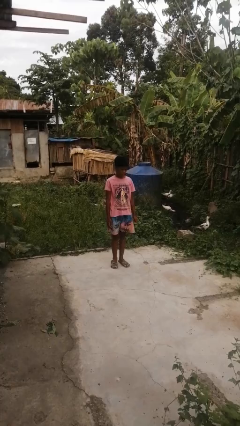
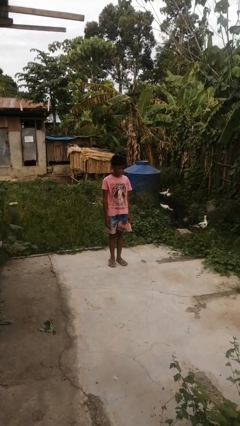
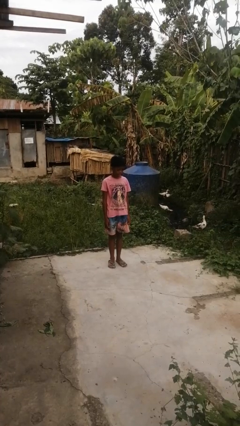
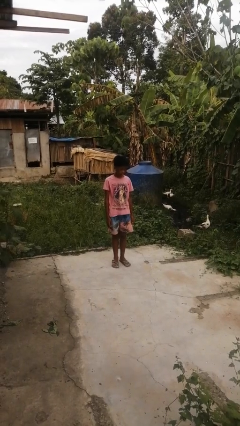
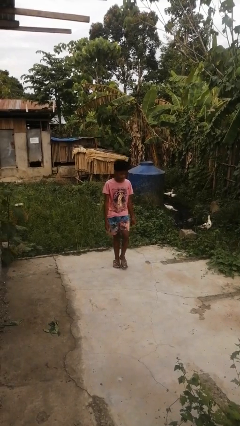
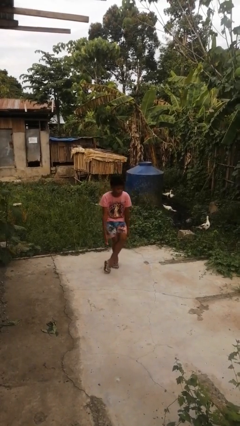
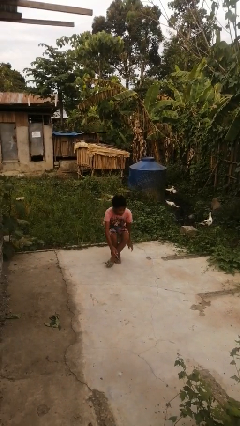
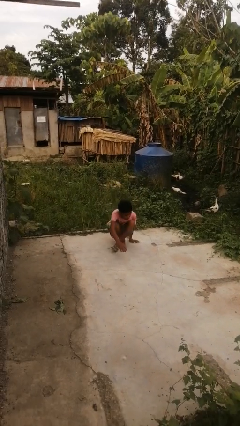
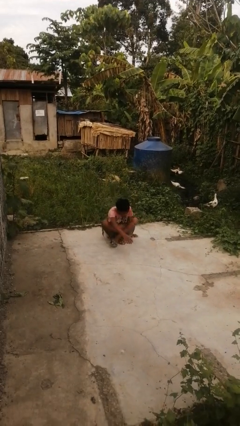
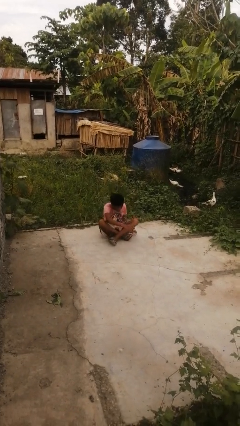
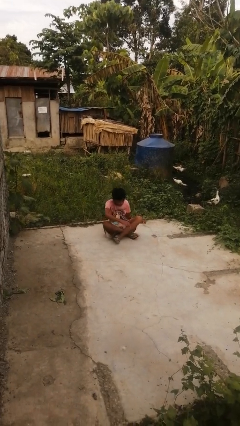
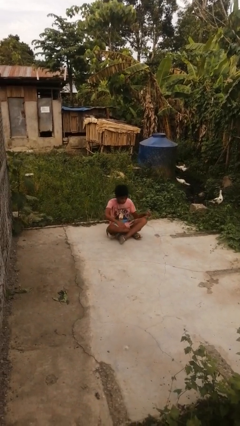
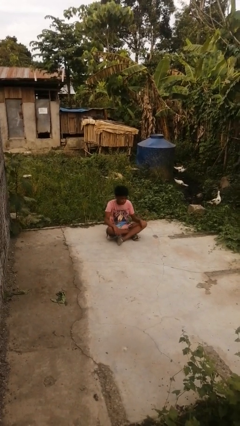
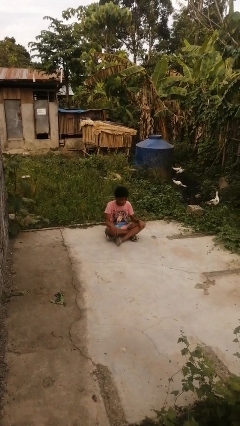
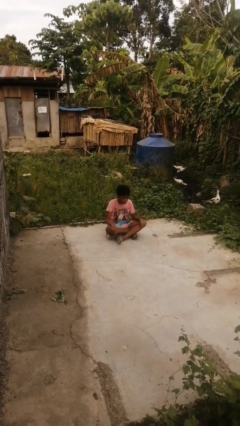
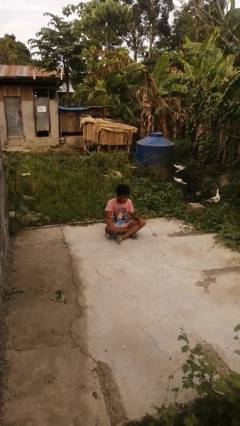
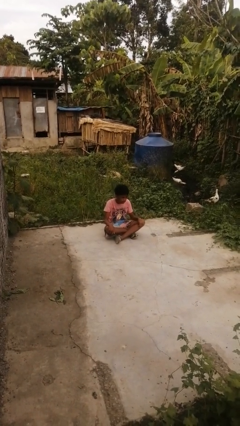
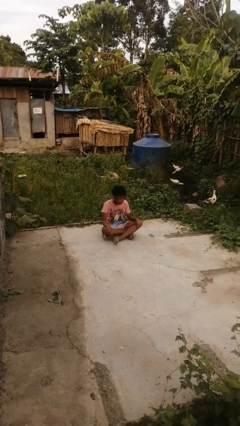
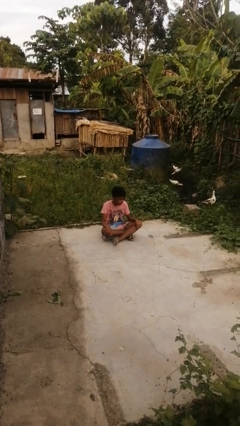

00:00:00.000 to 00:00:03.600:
person sits crisscross

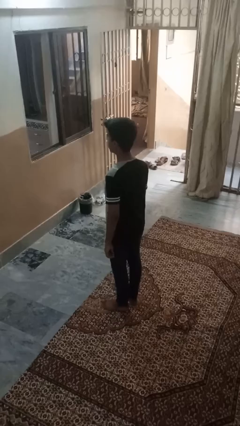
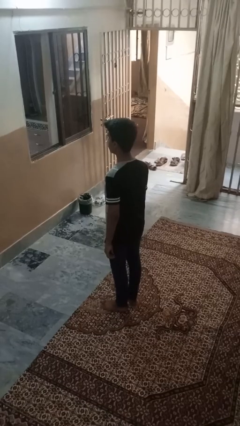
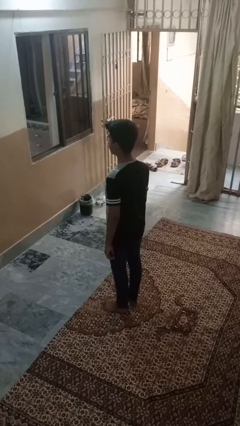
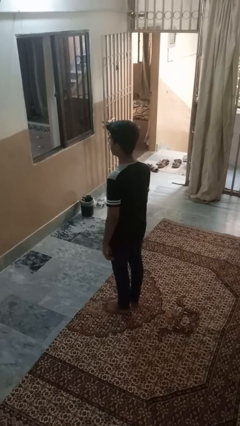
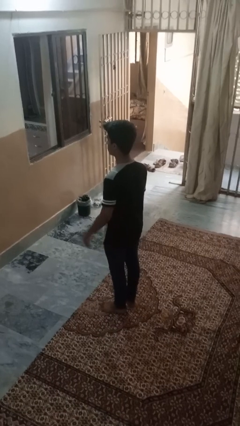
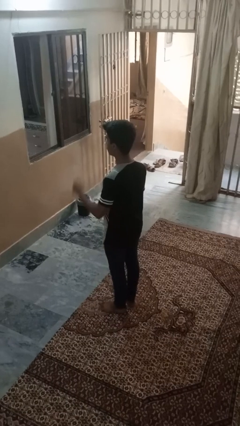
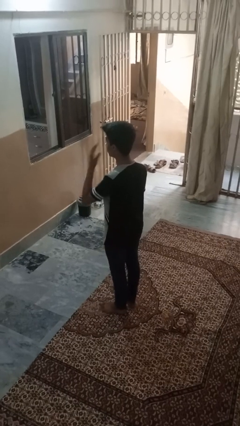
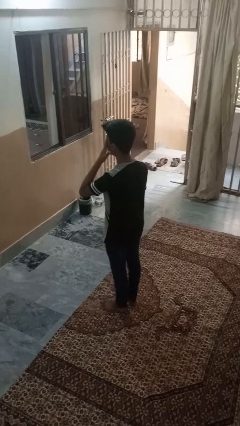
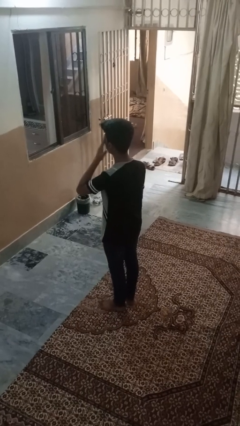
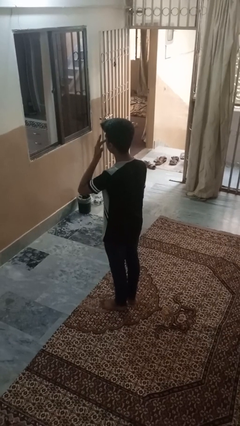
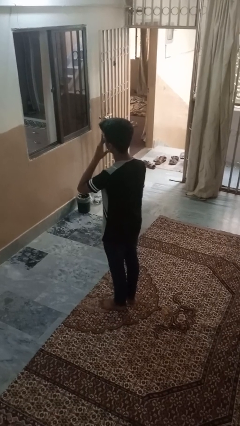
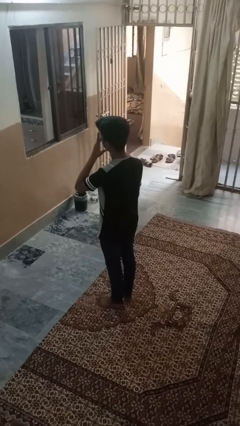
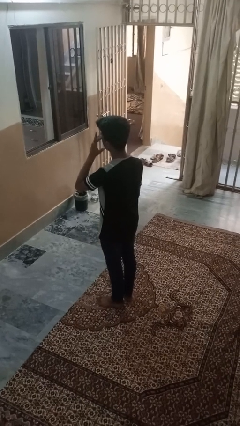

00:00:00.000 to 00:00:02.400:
person rubs eyes

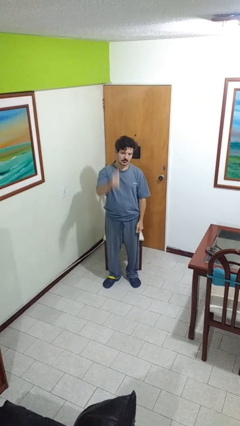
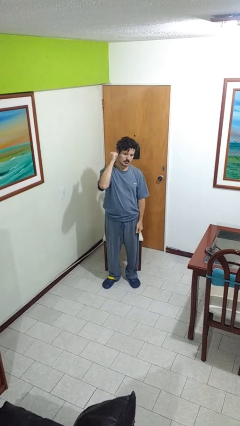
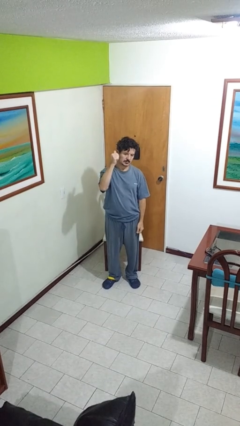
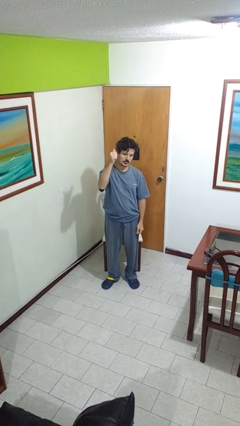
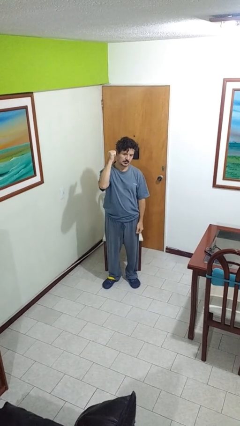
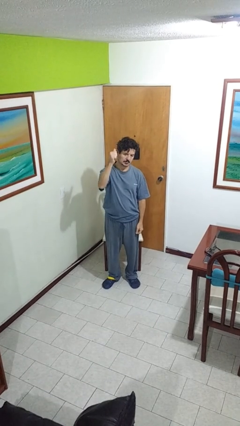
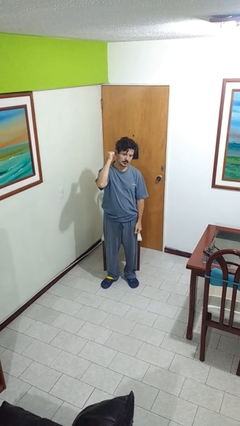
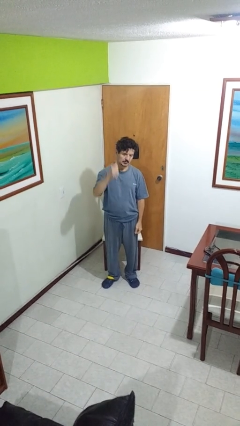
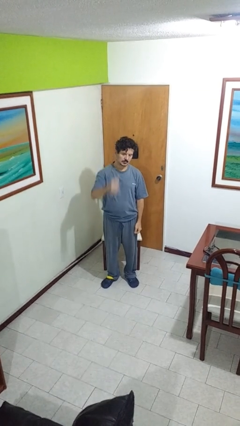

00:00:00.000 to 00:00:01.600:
person gestures behind me

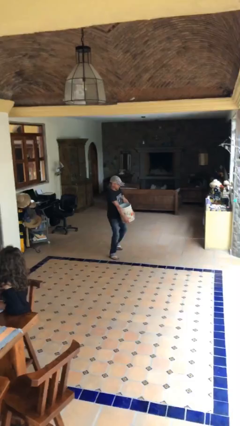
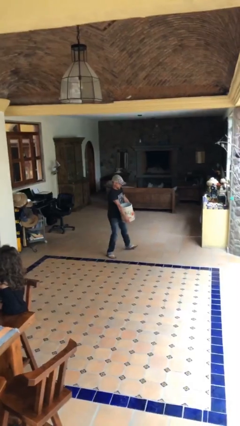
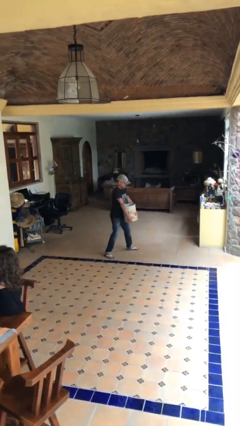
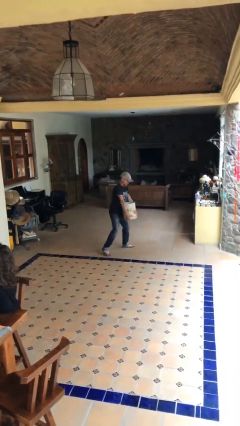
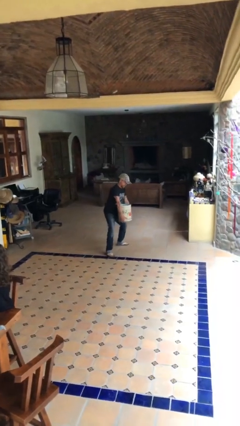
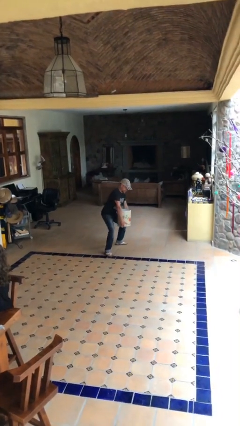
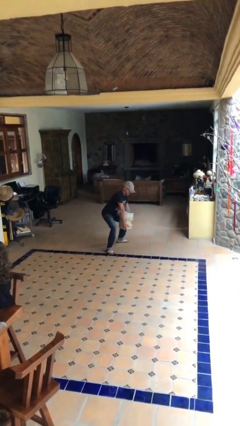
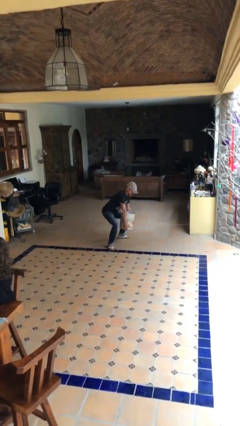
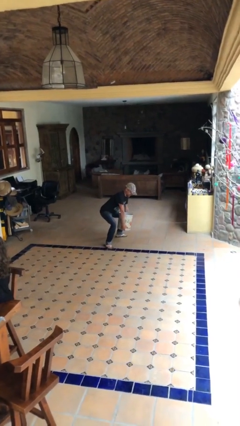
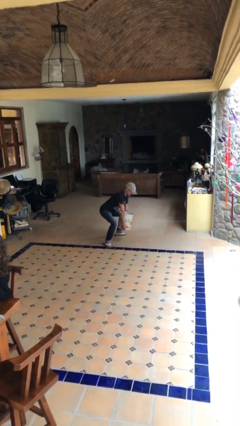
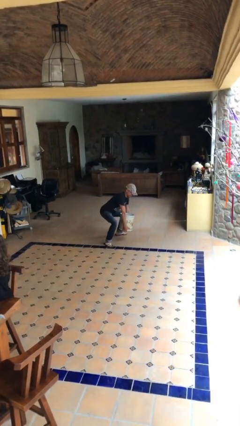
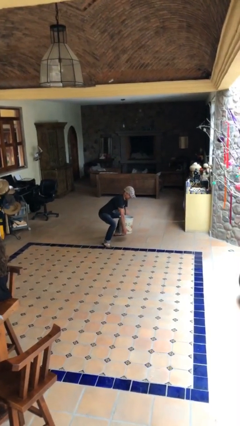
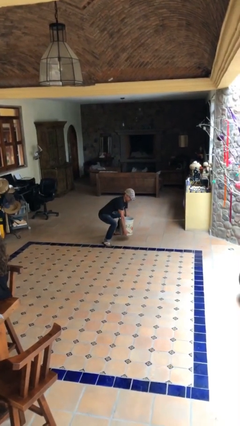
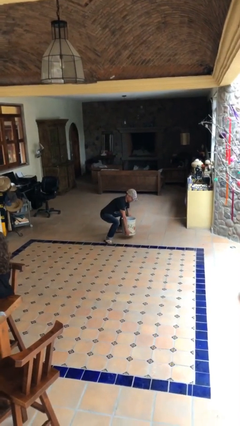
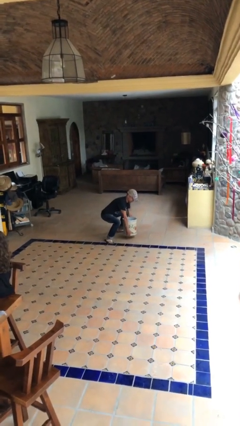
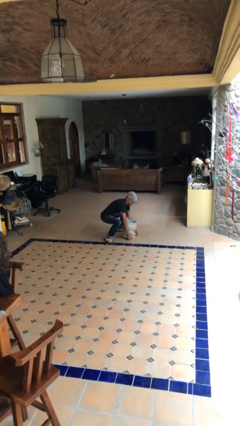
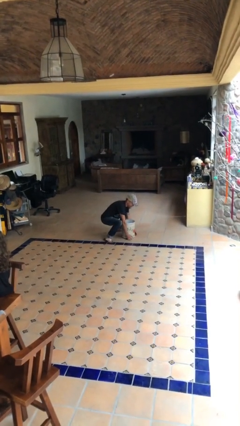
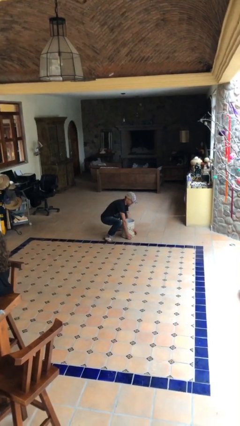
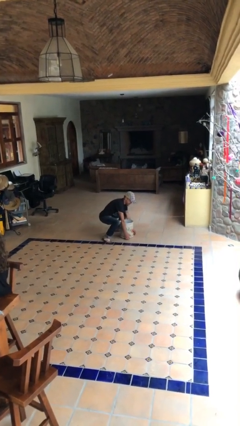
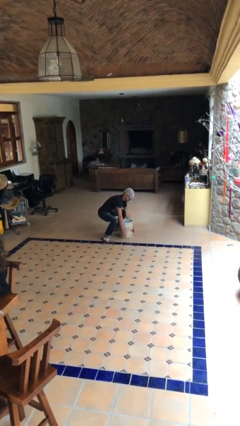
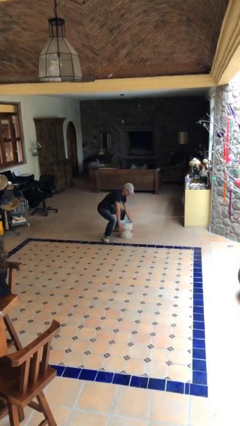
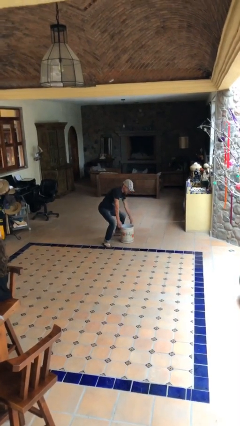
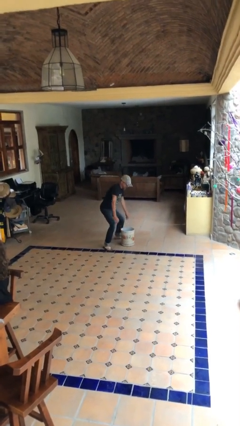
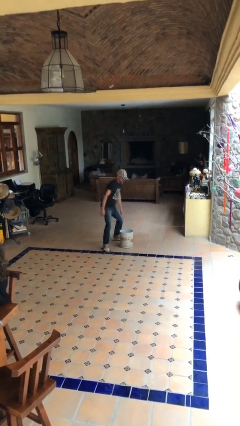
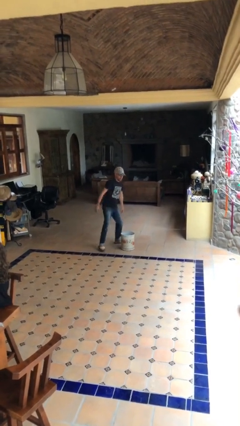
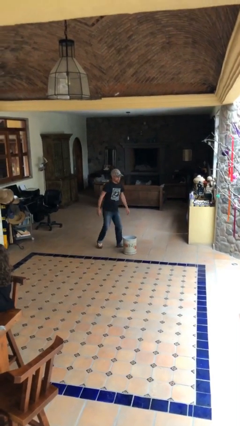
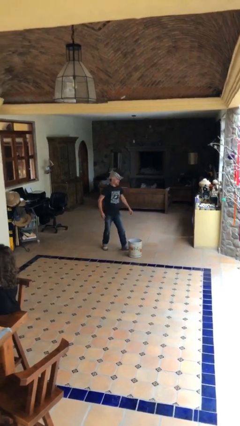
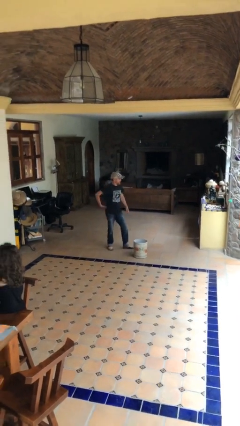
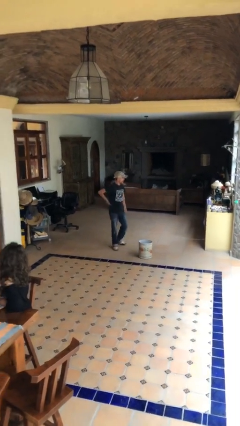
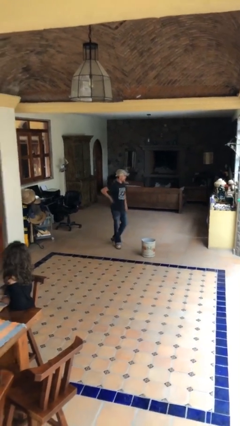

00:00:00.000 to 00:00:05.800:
person puts down object on floor

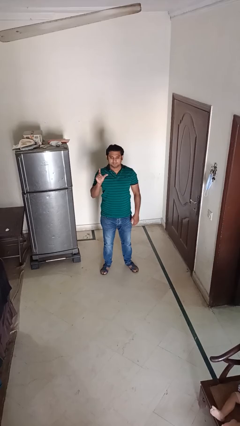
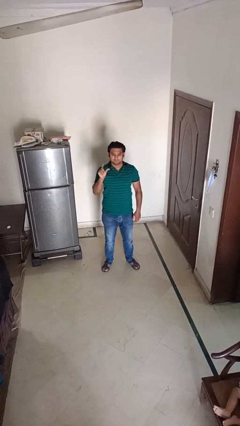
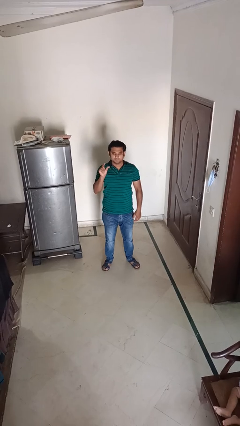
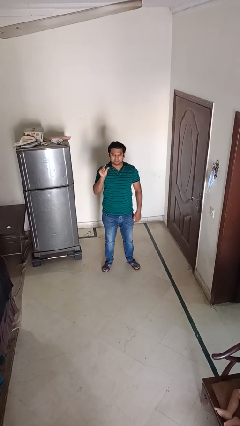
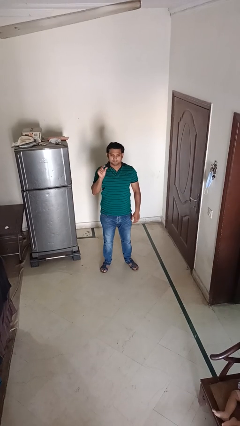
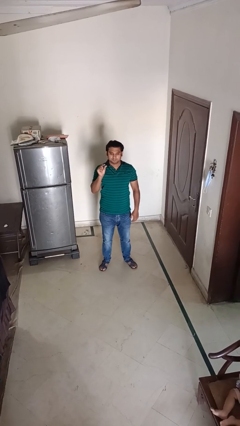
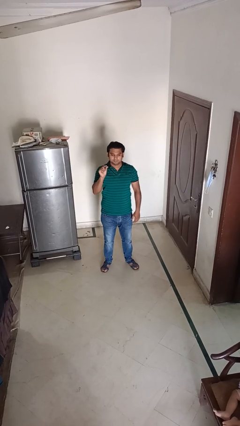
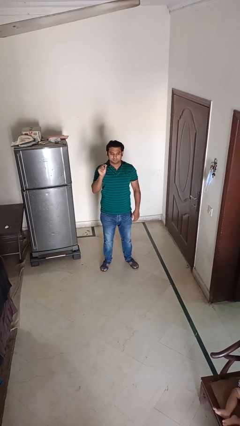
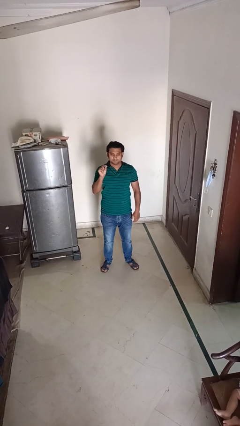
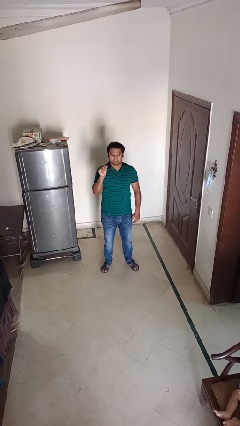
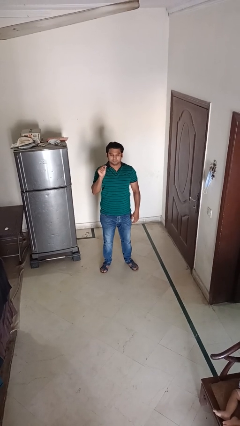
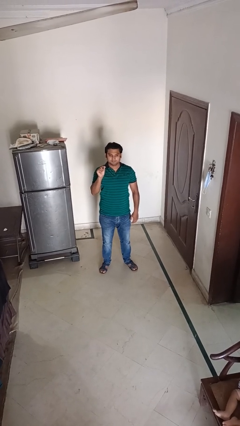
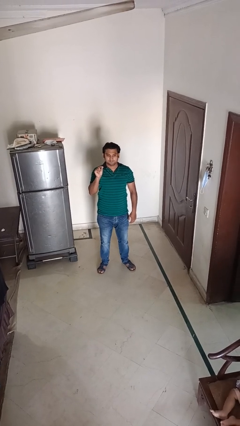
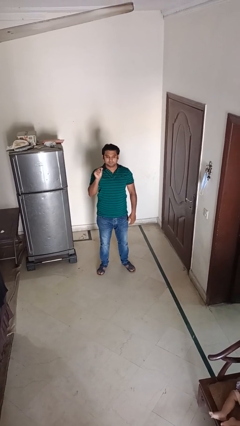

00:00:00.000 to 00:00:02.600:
person gestures zoom in

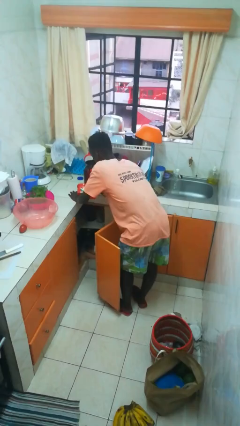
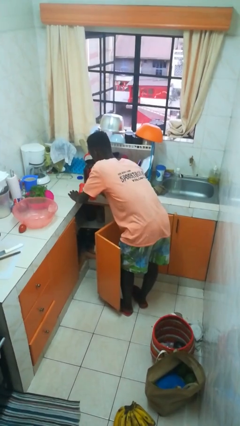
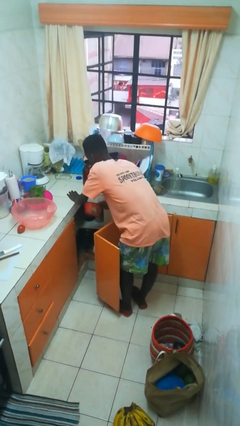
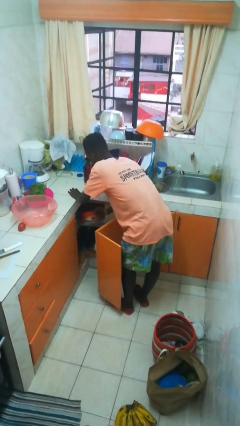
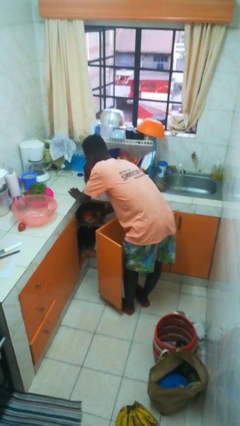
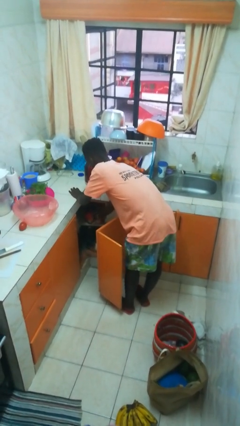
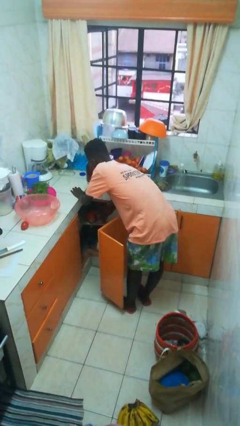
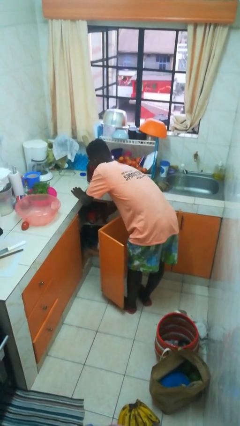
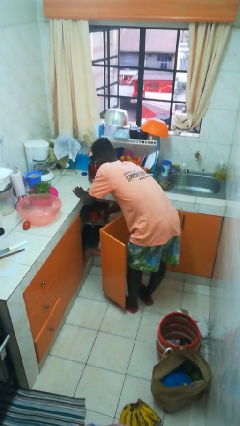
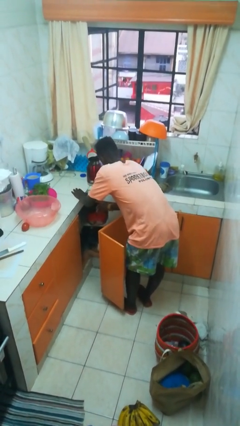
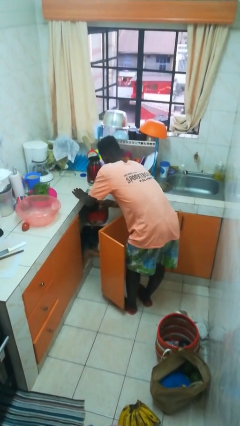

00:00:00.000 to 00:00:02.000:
person puts object in cabinet
